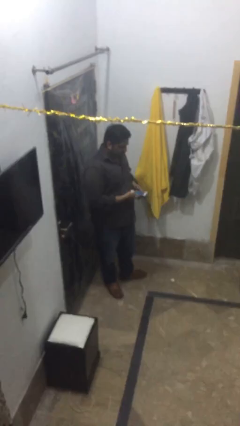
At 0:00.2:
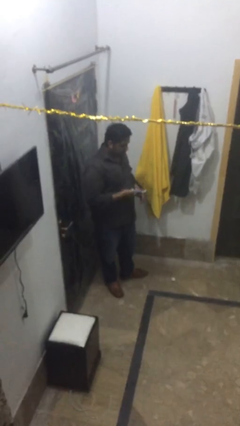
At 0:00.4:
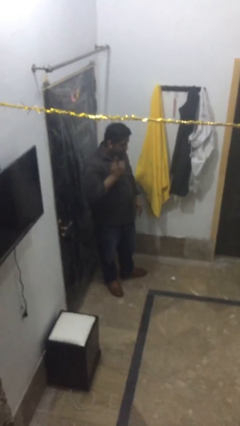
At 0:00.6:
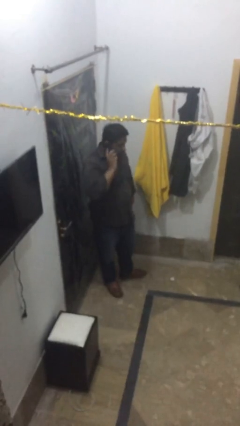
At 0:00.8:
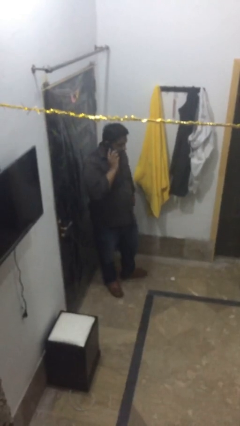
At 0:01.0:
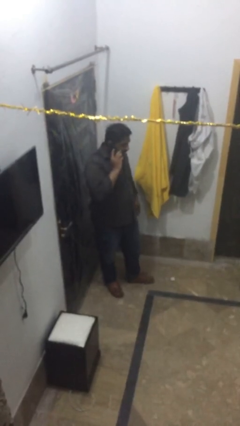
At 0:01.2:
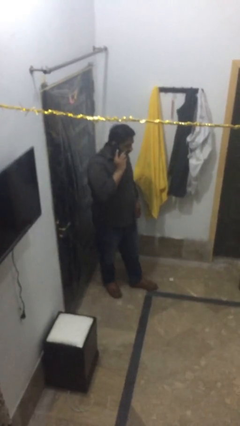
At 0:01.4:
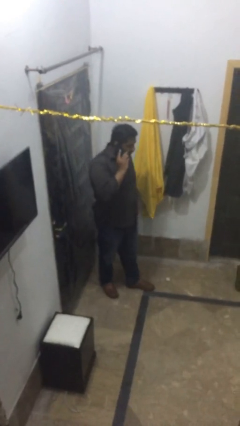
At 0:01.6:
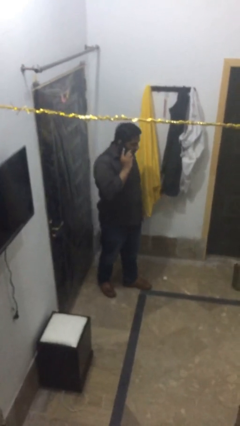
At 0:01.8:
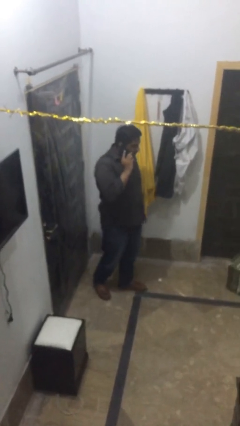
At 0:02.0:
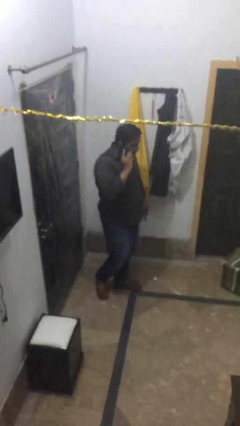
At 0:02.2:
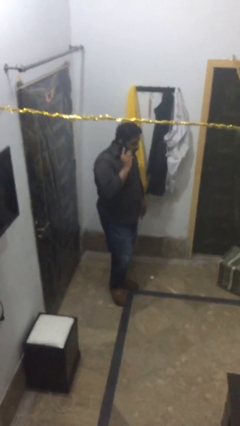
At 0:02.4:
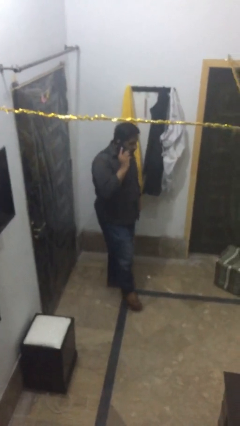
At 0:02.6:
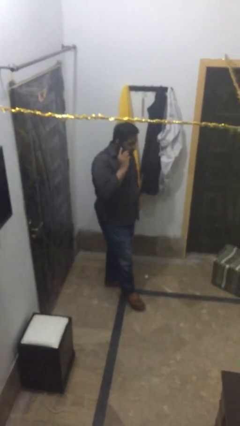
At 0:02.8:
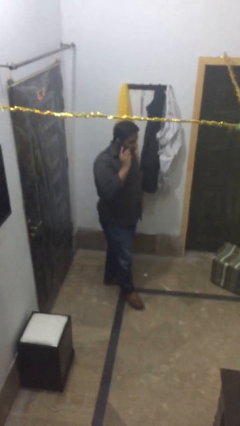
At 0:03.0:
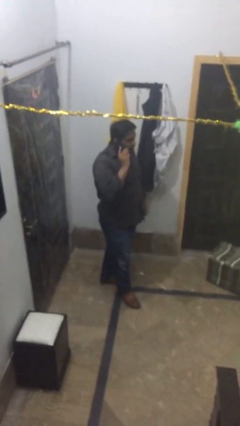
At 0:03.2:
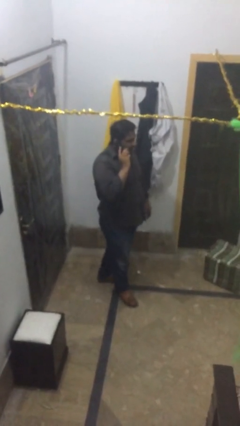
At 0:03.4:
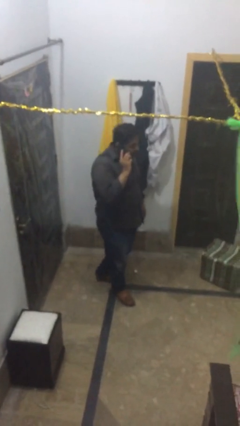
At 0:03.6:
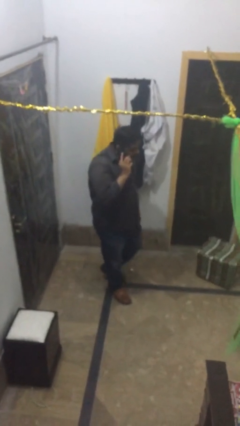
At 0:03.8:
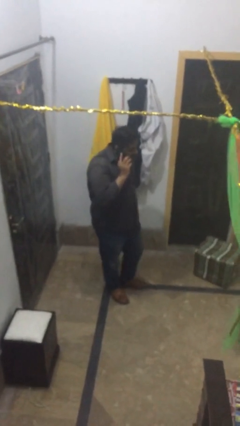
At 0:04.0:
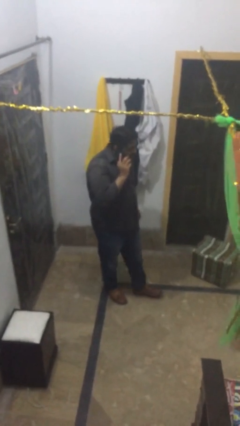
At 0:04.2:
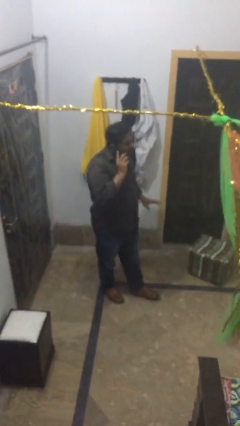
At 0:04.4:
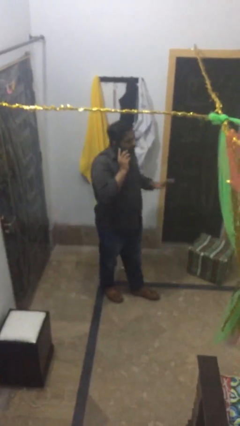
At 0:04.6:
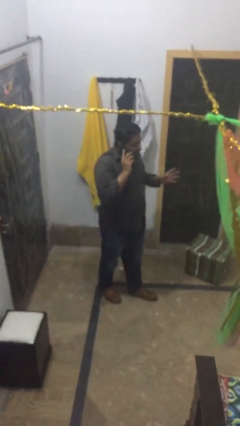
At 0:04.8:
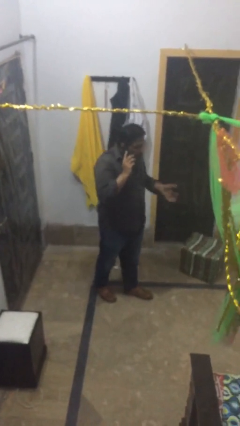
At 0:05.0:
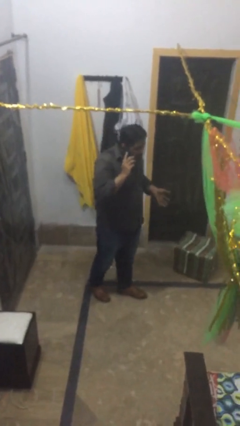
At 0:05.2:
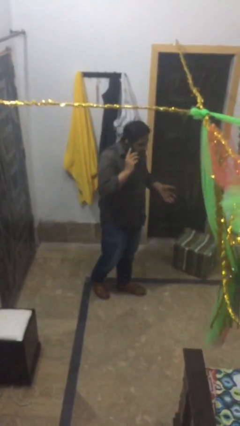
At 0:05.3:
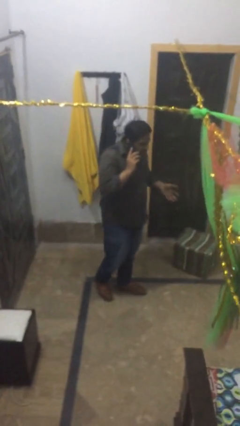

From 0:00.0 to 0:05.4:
person talks on phone

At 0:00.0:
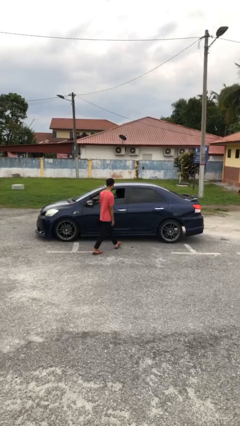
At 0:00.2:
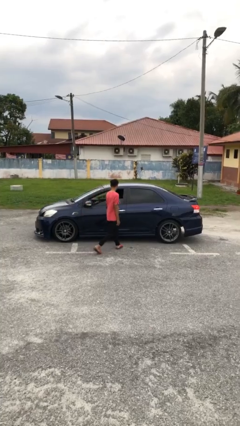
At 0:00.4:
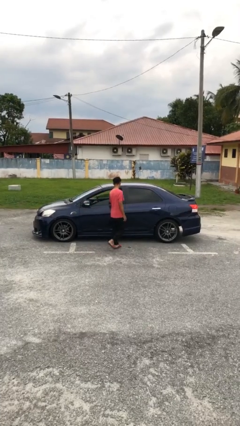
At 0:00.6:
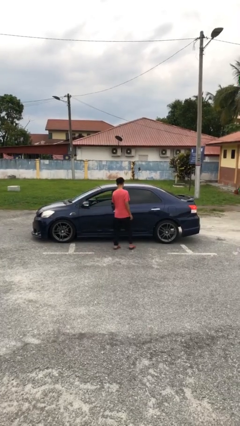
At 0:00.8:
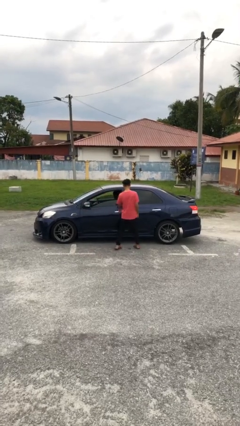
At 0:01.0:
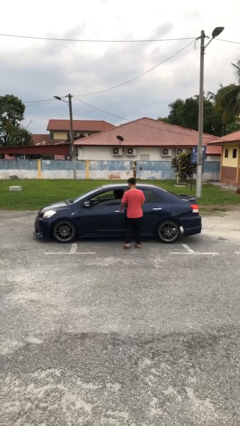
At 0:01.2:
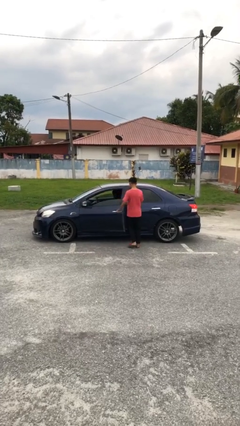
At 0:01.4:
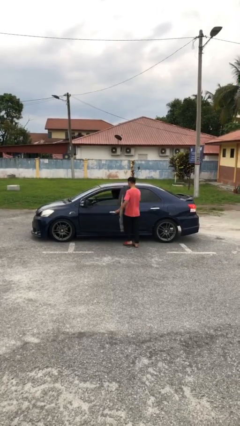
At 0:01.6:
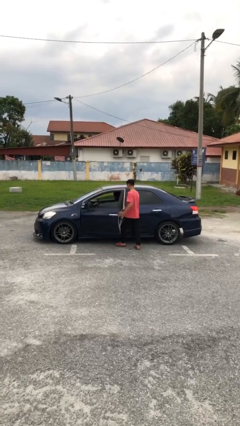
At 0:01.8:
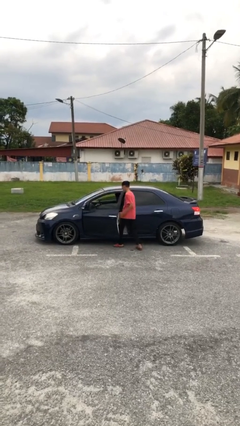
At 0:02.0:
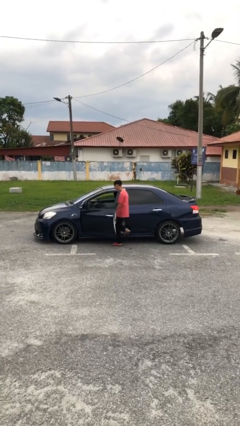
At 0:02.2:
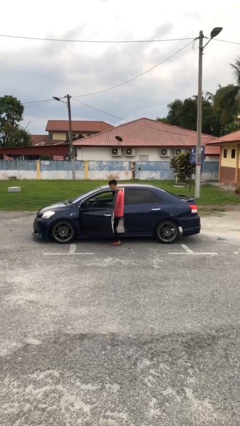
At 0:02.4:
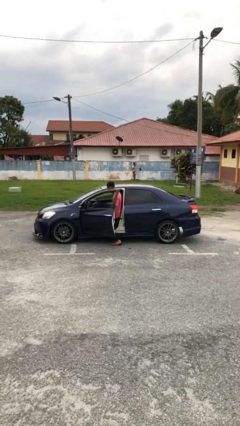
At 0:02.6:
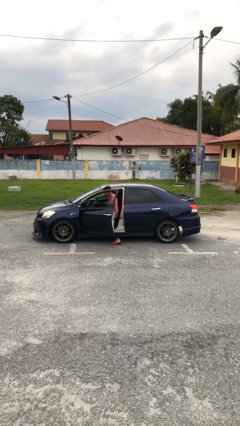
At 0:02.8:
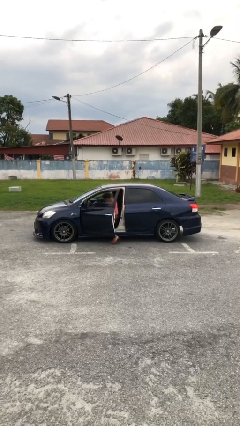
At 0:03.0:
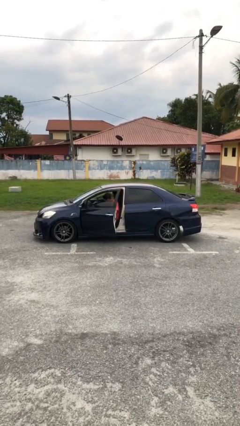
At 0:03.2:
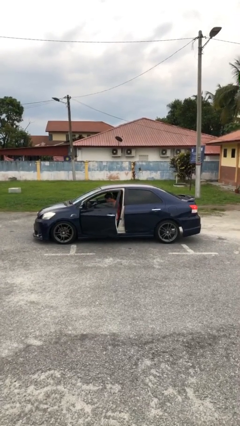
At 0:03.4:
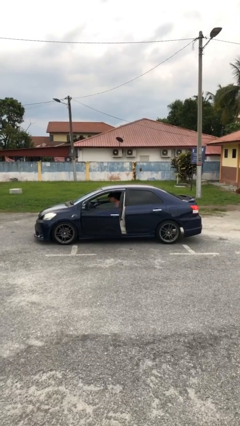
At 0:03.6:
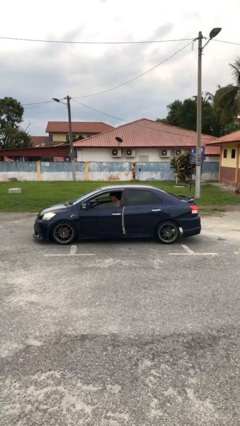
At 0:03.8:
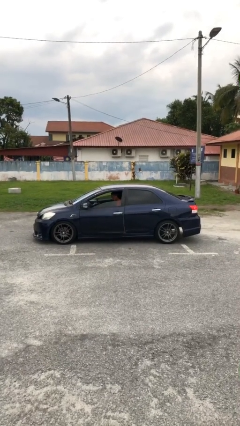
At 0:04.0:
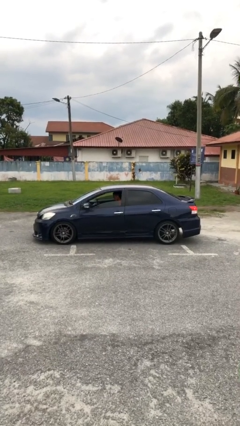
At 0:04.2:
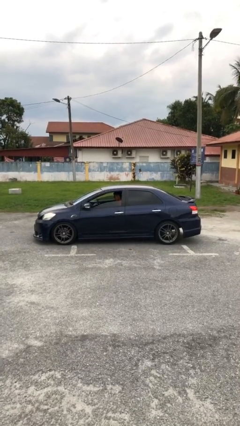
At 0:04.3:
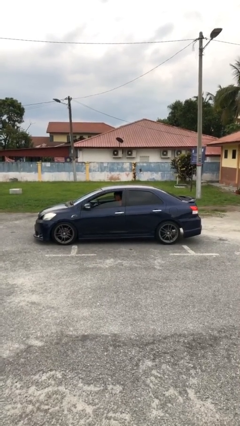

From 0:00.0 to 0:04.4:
car picks up person

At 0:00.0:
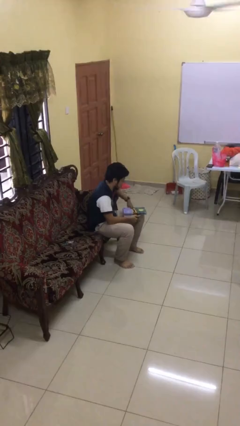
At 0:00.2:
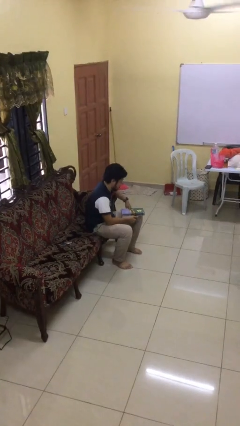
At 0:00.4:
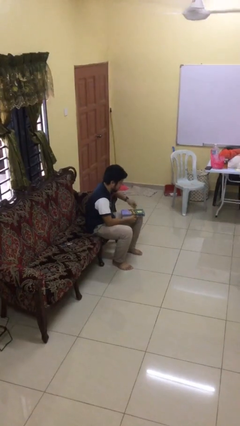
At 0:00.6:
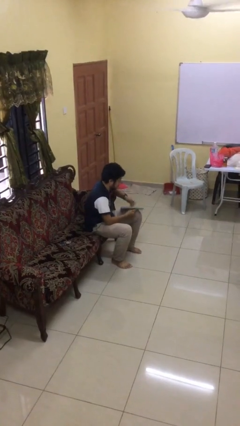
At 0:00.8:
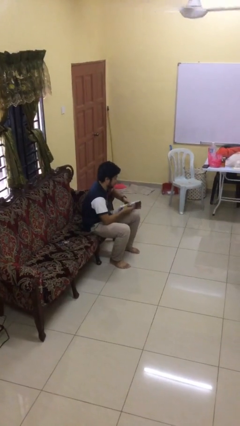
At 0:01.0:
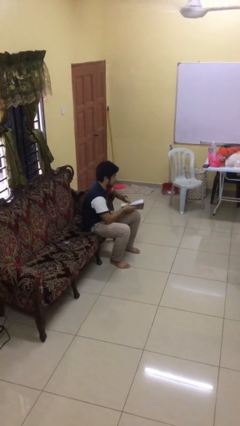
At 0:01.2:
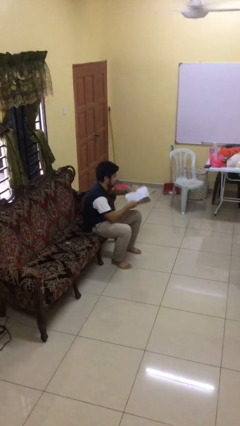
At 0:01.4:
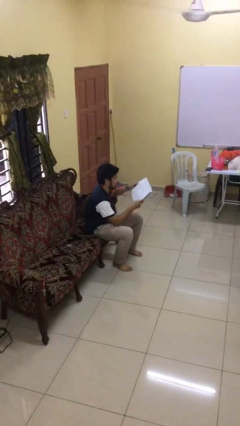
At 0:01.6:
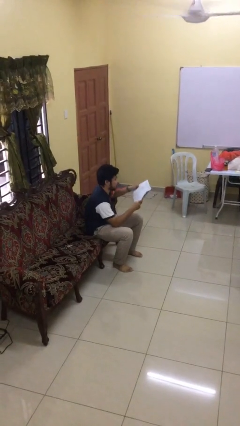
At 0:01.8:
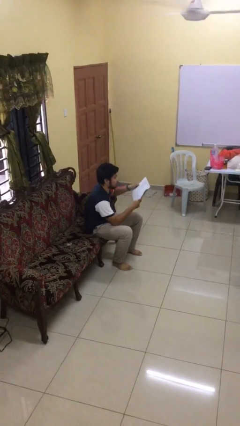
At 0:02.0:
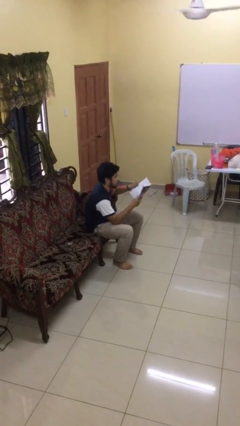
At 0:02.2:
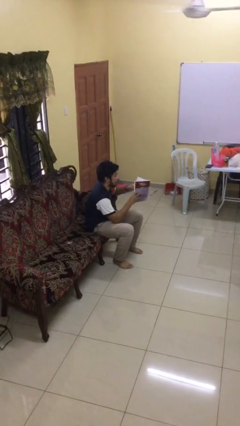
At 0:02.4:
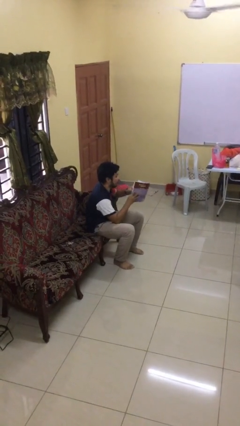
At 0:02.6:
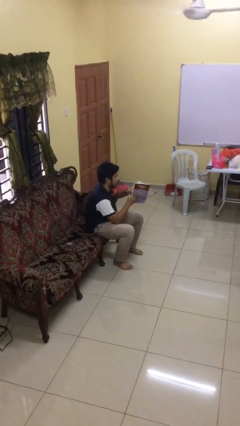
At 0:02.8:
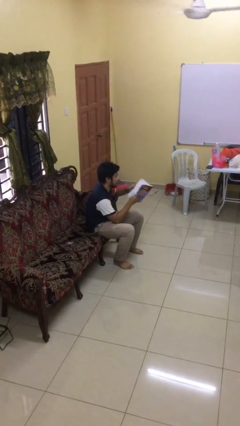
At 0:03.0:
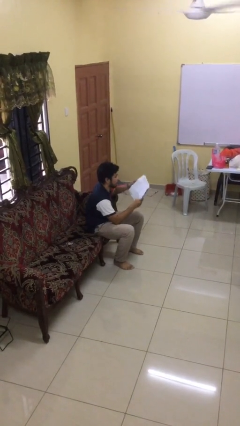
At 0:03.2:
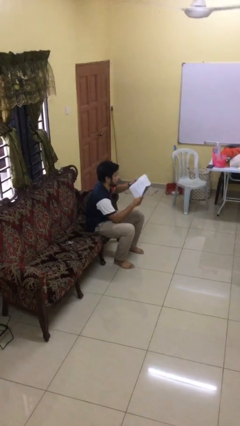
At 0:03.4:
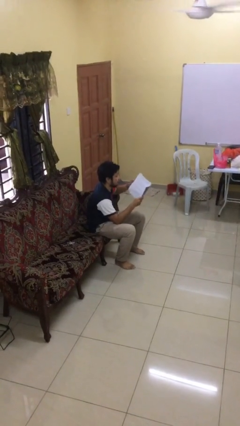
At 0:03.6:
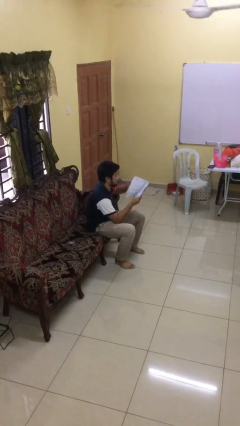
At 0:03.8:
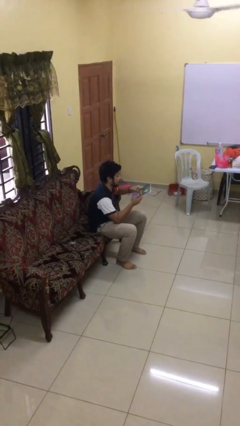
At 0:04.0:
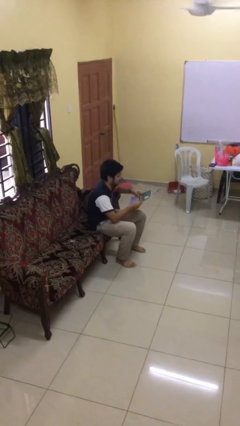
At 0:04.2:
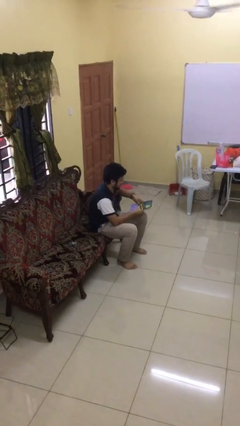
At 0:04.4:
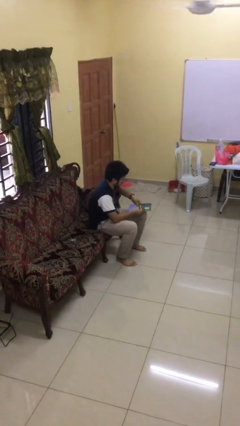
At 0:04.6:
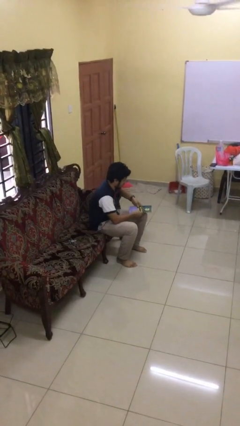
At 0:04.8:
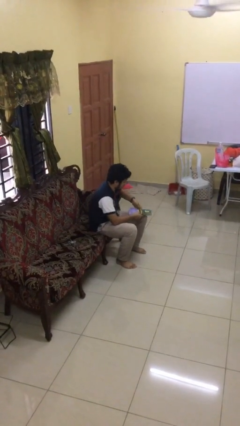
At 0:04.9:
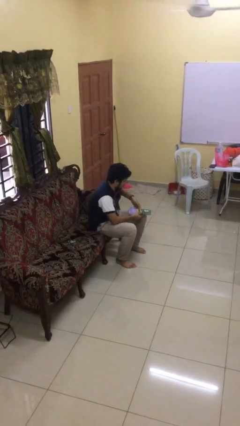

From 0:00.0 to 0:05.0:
person reads magazine

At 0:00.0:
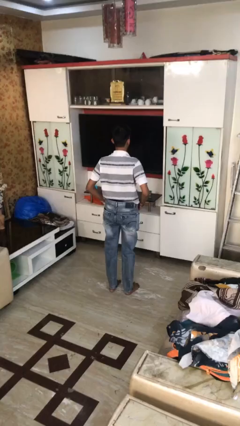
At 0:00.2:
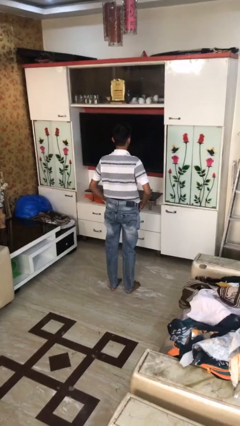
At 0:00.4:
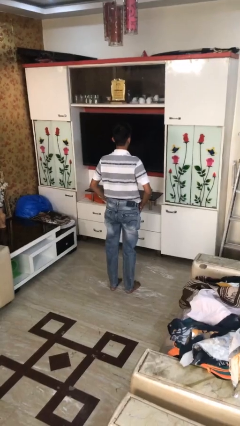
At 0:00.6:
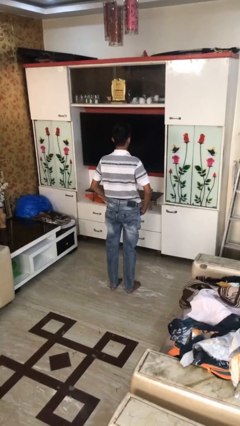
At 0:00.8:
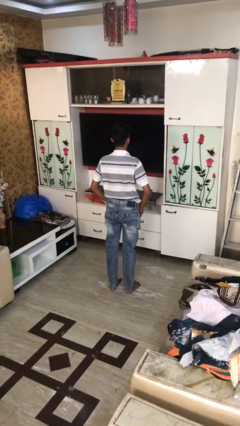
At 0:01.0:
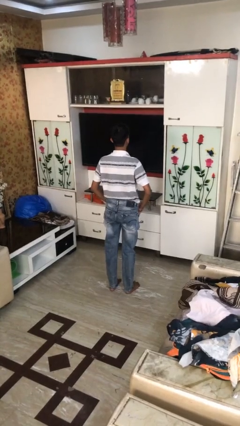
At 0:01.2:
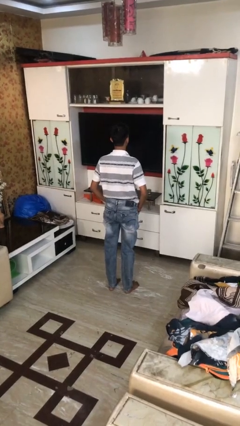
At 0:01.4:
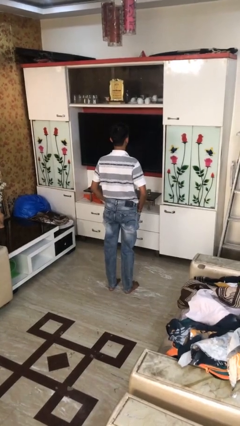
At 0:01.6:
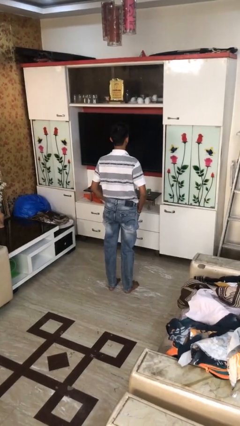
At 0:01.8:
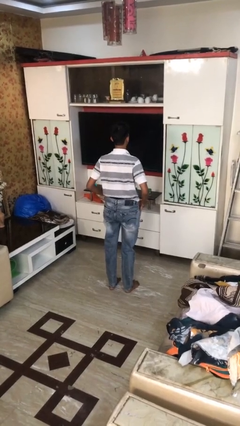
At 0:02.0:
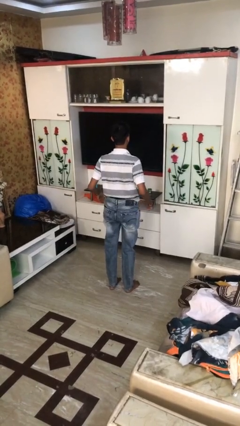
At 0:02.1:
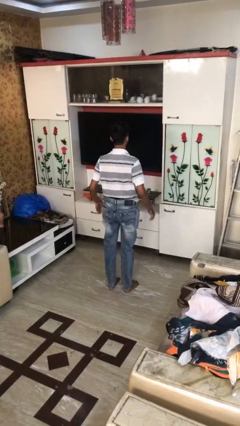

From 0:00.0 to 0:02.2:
person puts hands in back pockets

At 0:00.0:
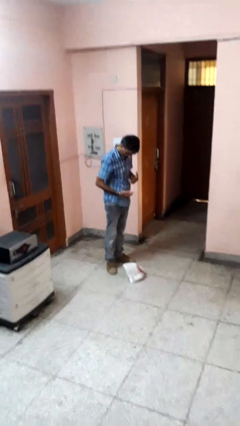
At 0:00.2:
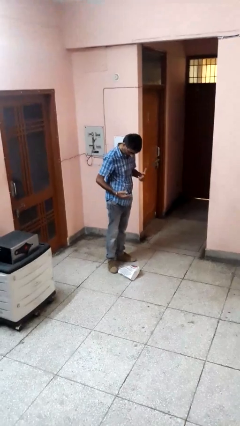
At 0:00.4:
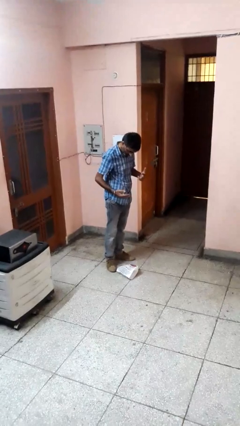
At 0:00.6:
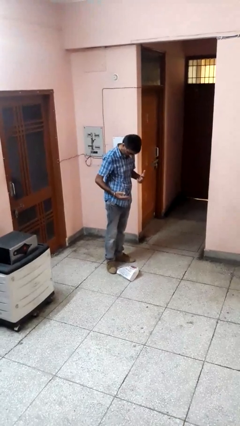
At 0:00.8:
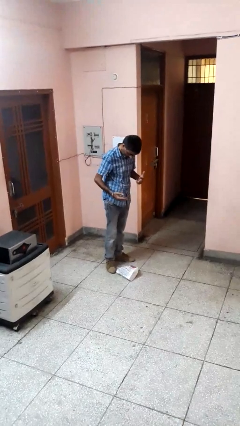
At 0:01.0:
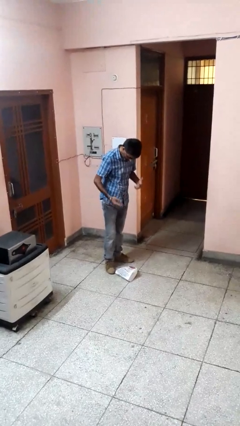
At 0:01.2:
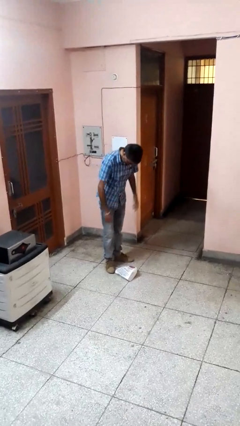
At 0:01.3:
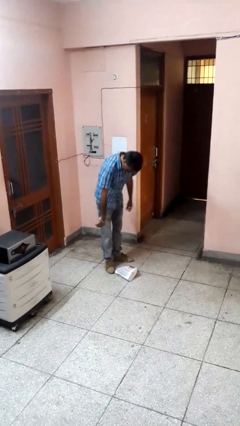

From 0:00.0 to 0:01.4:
person drops object
